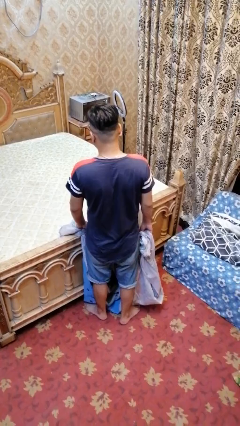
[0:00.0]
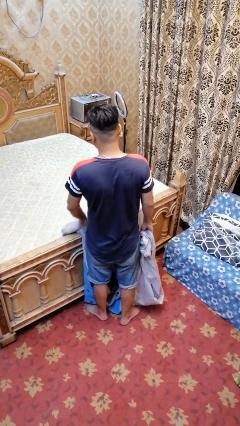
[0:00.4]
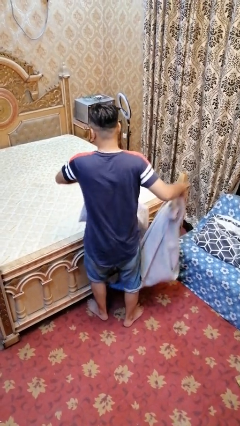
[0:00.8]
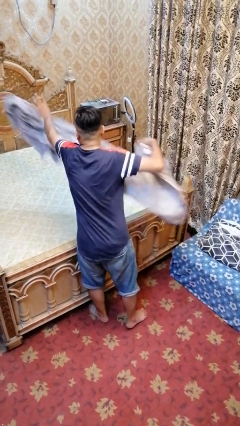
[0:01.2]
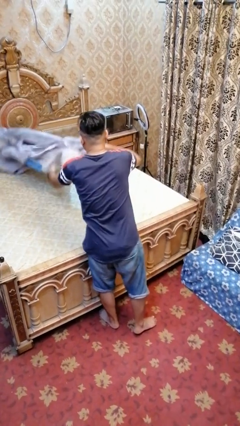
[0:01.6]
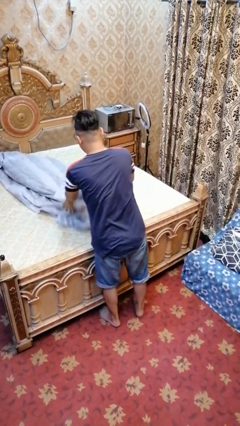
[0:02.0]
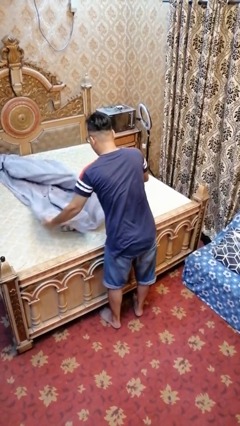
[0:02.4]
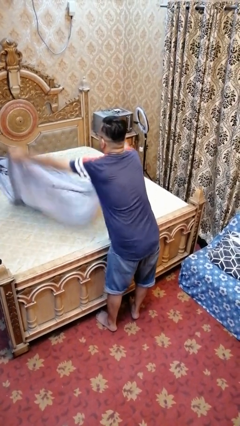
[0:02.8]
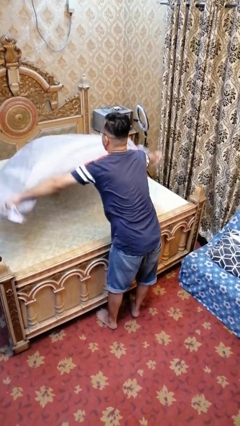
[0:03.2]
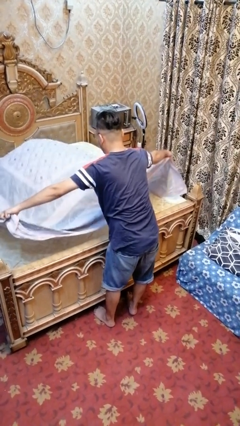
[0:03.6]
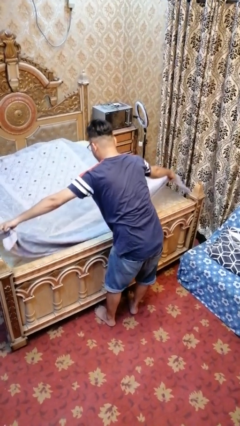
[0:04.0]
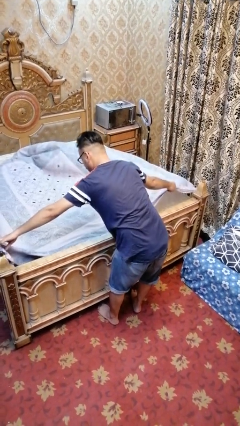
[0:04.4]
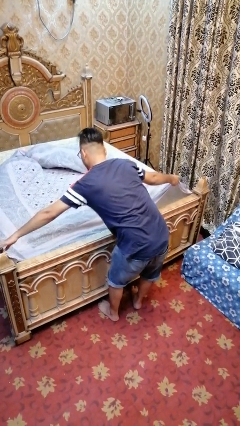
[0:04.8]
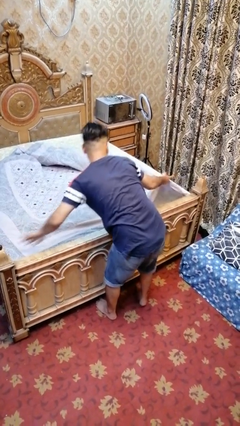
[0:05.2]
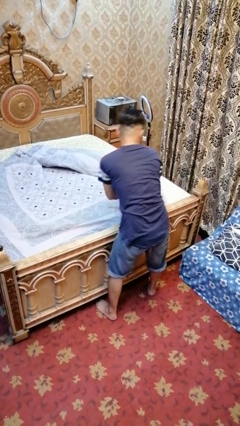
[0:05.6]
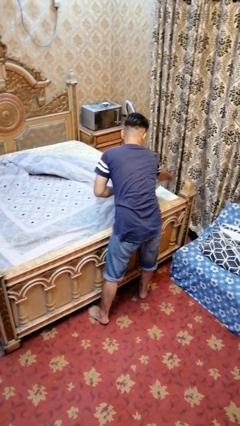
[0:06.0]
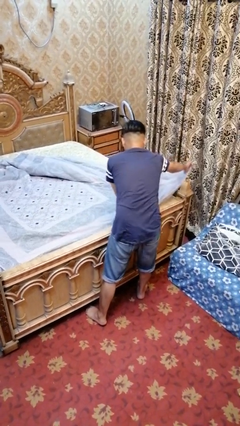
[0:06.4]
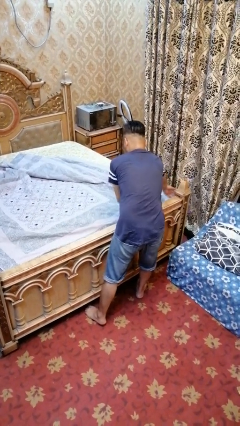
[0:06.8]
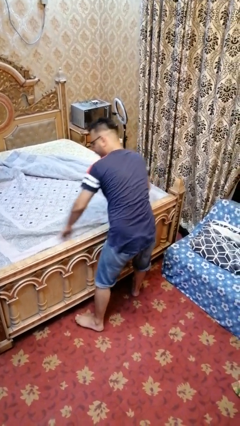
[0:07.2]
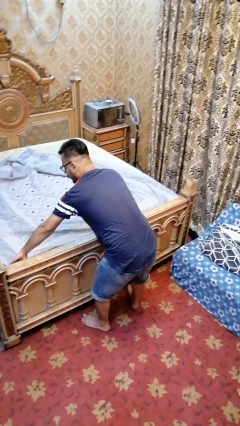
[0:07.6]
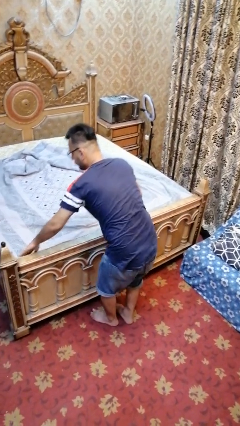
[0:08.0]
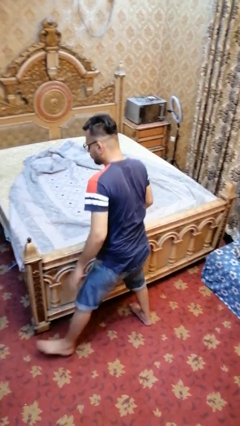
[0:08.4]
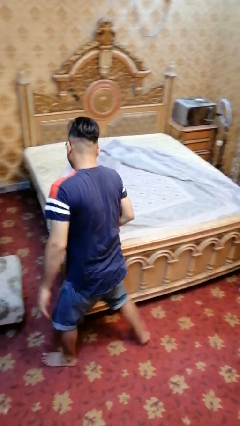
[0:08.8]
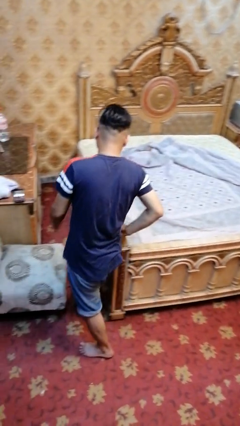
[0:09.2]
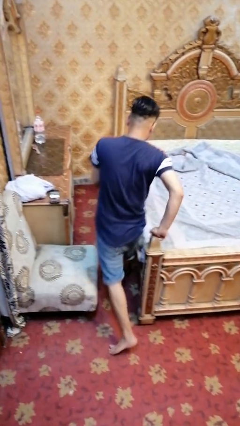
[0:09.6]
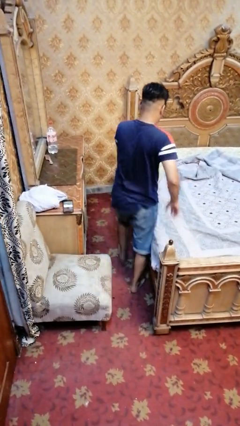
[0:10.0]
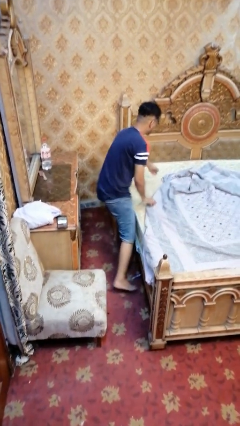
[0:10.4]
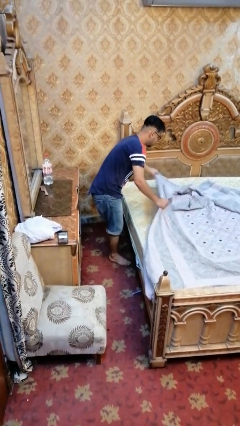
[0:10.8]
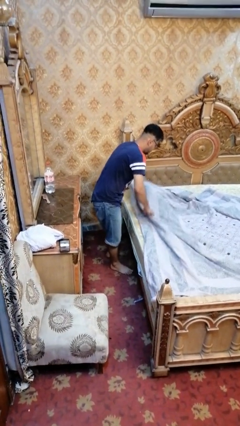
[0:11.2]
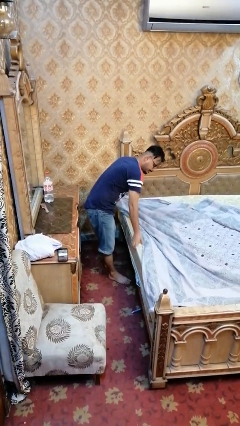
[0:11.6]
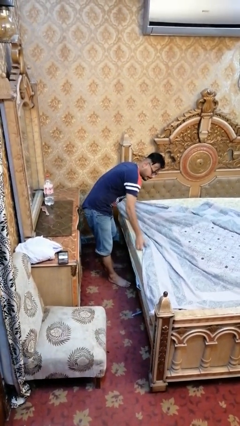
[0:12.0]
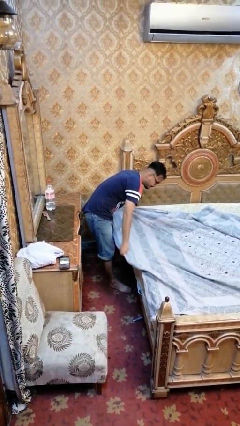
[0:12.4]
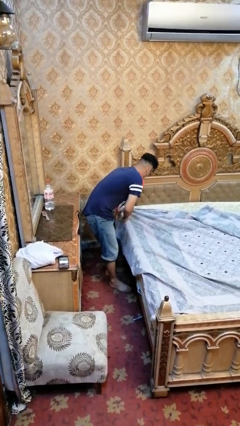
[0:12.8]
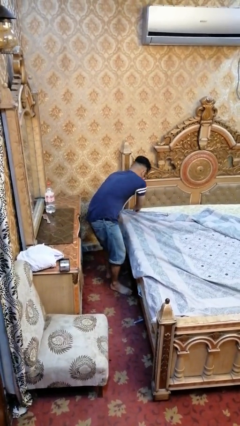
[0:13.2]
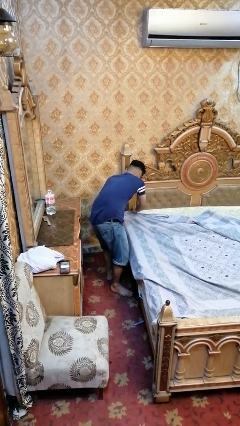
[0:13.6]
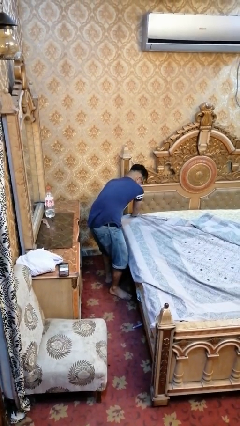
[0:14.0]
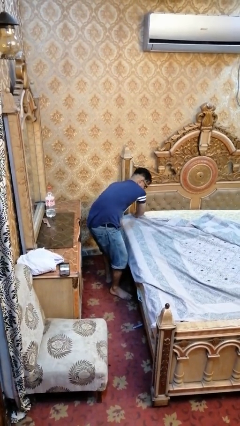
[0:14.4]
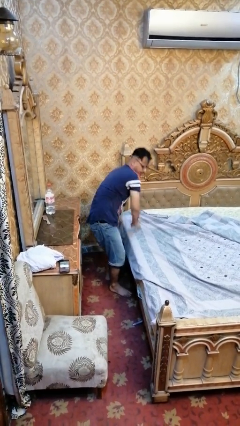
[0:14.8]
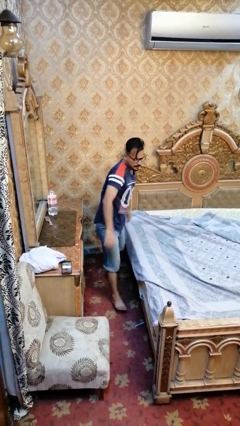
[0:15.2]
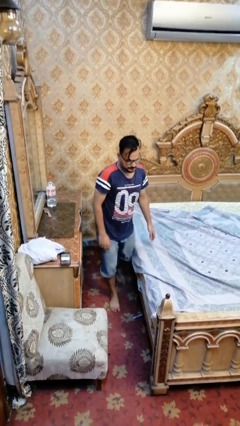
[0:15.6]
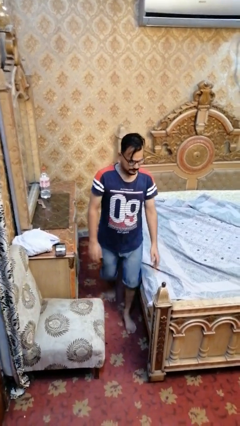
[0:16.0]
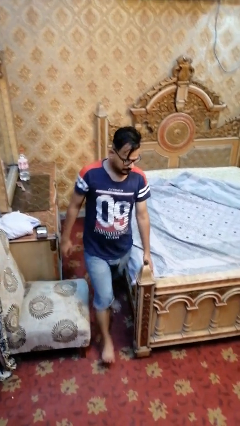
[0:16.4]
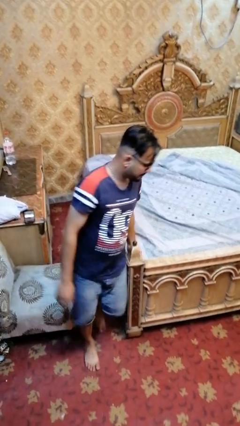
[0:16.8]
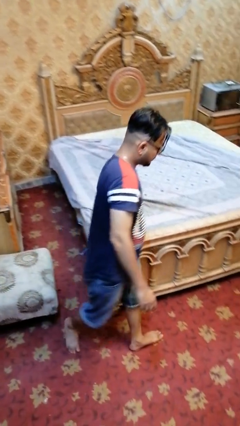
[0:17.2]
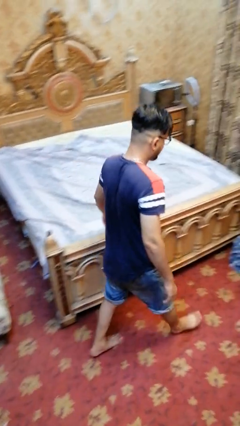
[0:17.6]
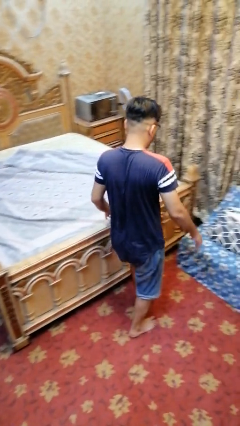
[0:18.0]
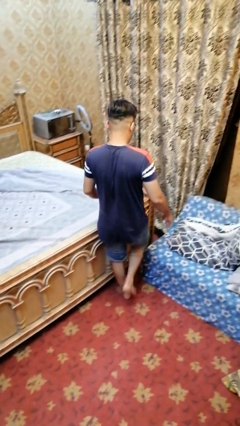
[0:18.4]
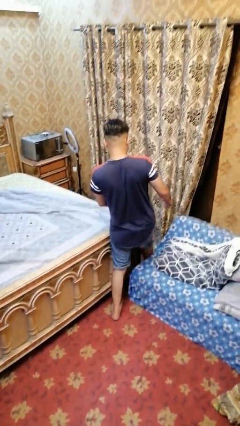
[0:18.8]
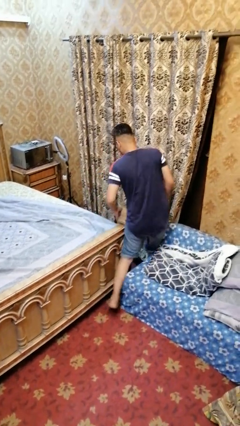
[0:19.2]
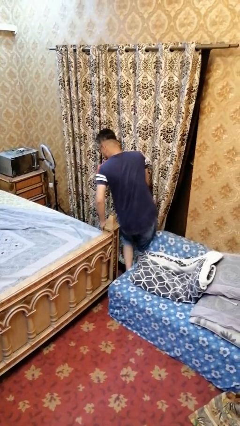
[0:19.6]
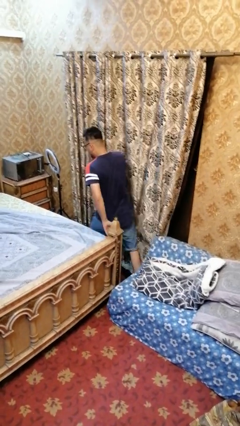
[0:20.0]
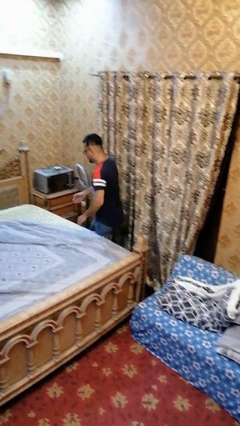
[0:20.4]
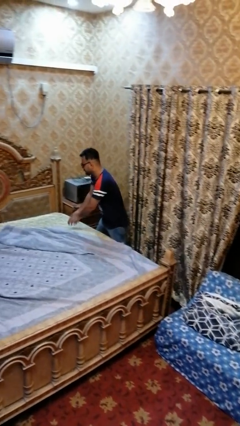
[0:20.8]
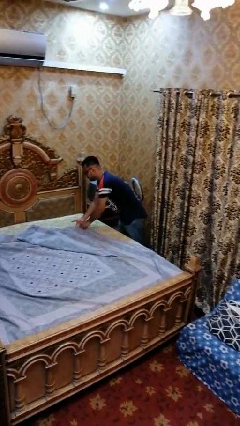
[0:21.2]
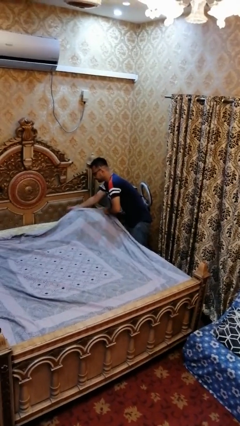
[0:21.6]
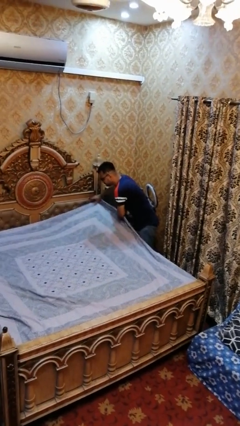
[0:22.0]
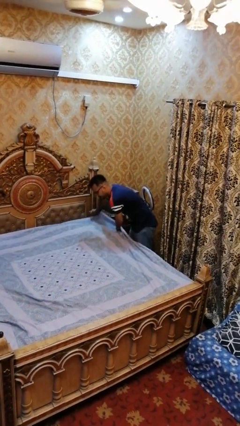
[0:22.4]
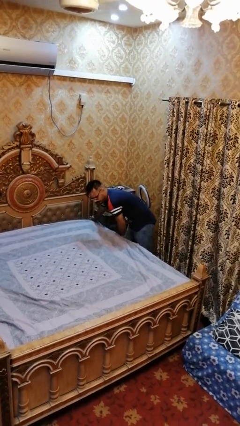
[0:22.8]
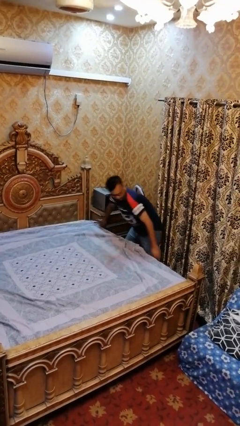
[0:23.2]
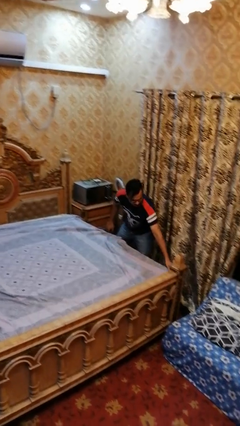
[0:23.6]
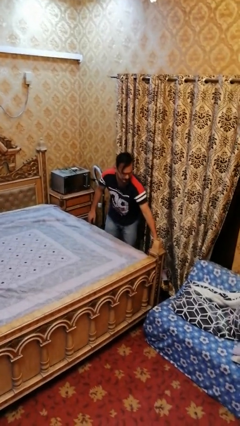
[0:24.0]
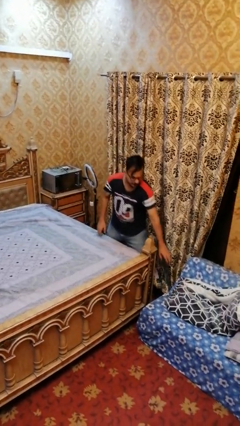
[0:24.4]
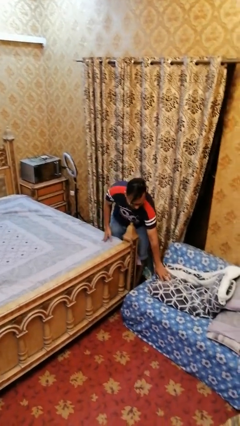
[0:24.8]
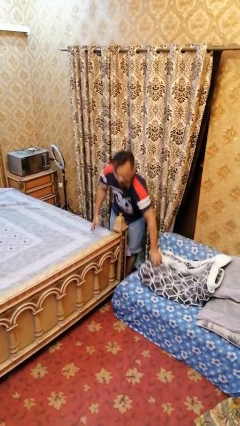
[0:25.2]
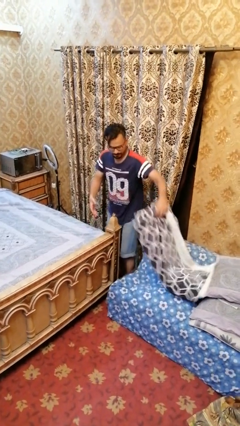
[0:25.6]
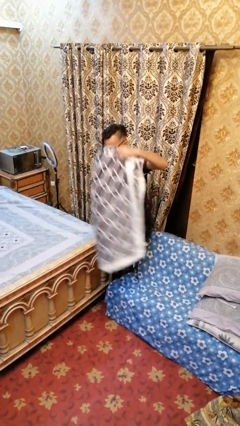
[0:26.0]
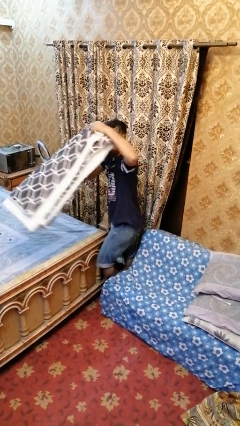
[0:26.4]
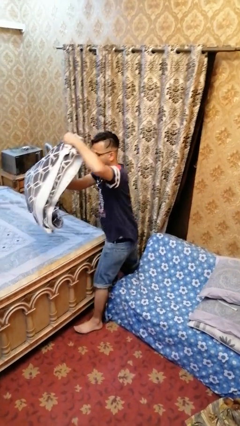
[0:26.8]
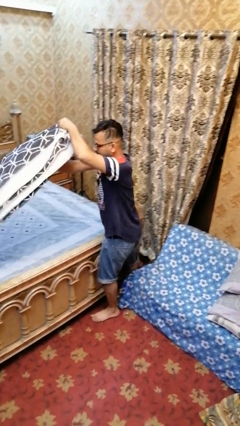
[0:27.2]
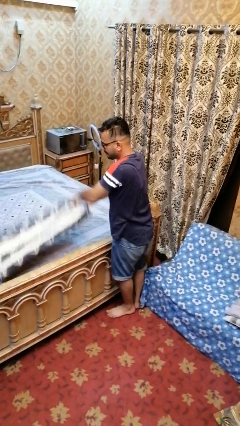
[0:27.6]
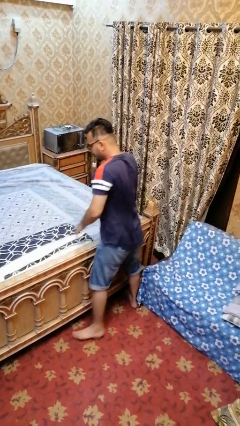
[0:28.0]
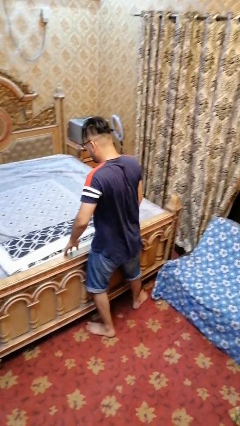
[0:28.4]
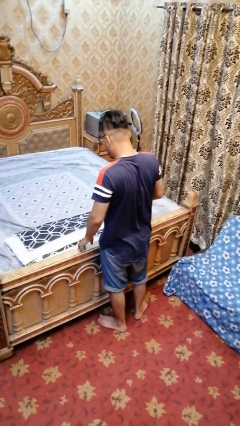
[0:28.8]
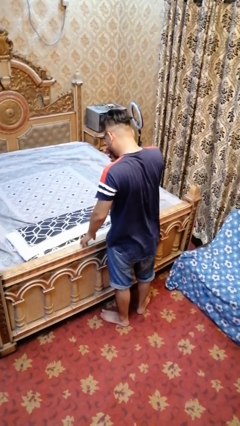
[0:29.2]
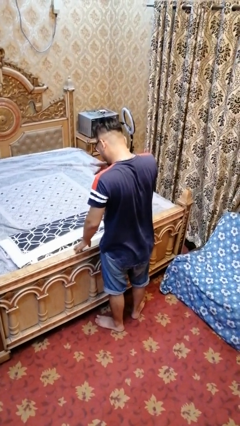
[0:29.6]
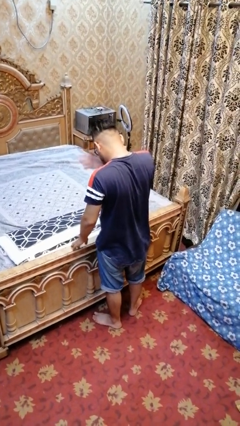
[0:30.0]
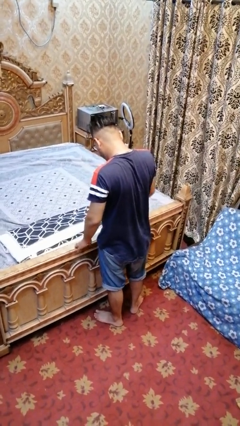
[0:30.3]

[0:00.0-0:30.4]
person makes bed

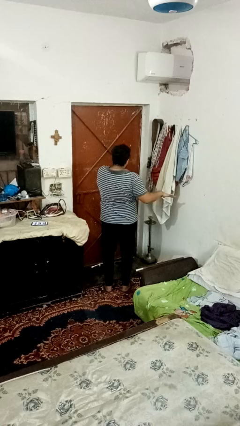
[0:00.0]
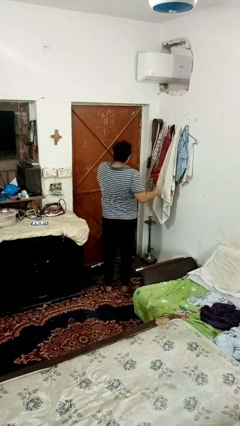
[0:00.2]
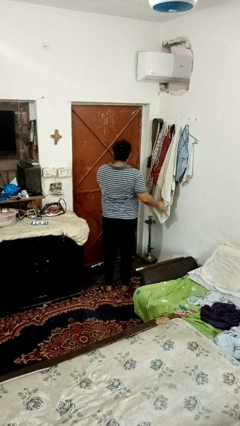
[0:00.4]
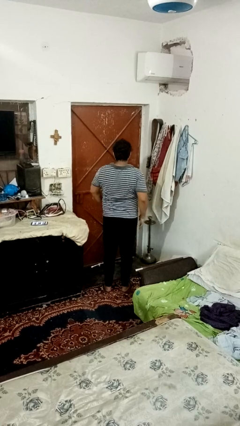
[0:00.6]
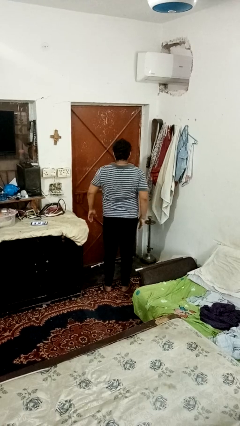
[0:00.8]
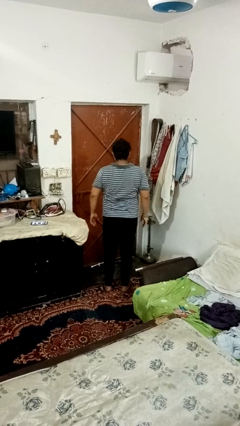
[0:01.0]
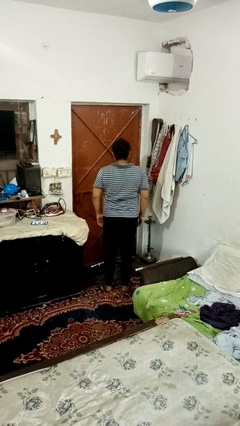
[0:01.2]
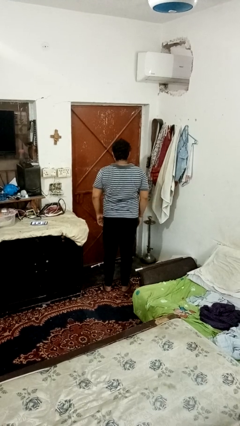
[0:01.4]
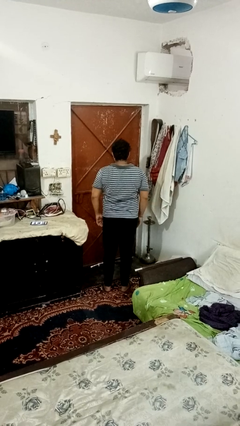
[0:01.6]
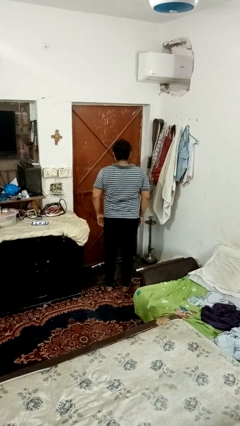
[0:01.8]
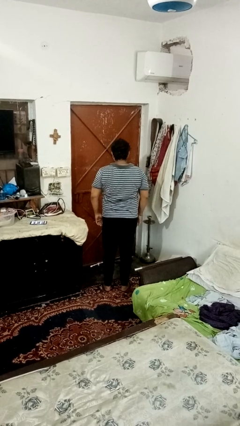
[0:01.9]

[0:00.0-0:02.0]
person dances in place

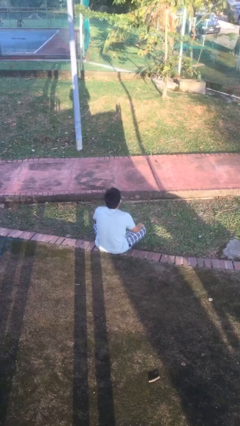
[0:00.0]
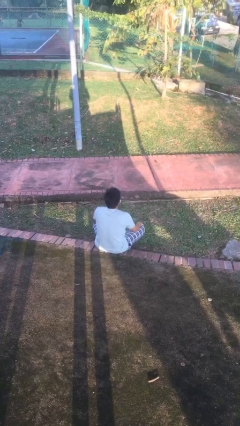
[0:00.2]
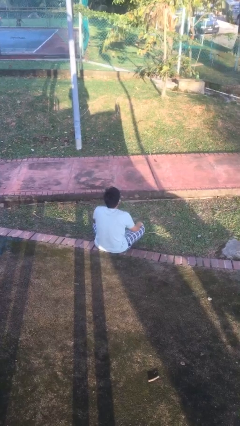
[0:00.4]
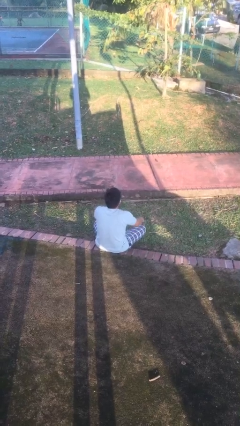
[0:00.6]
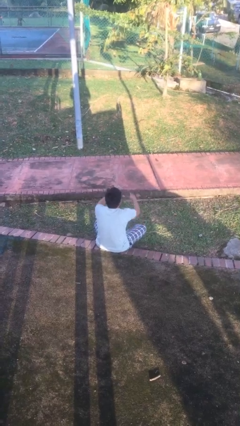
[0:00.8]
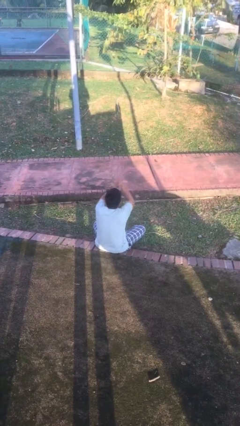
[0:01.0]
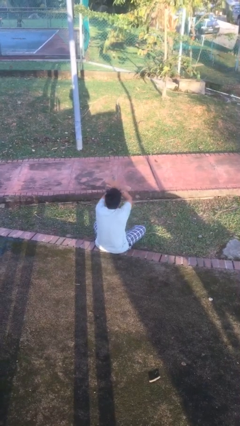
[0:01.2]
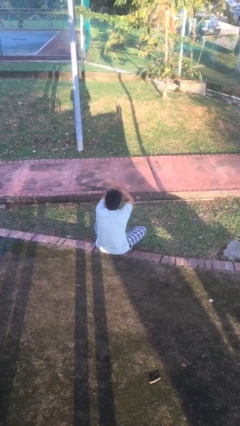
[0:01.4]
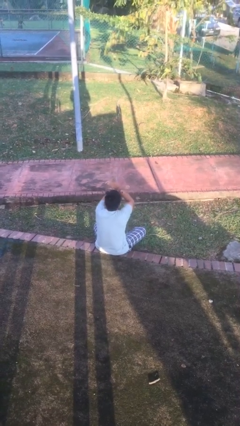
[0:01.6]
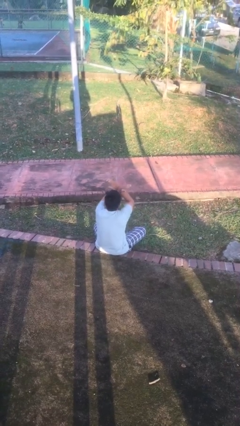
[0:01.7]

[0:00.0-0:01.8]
person gestures arms x
